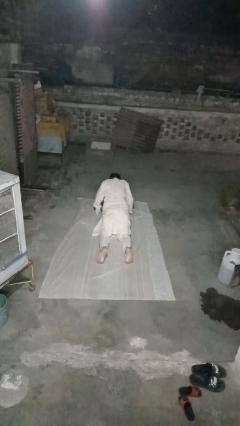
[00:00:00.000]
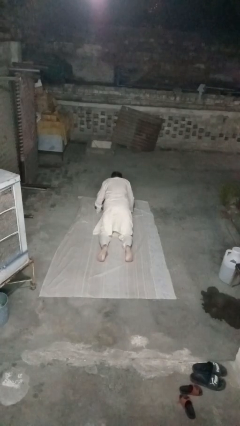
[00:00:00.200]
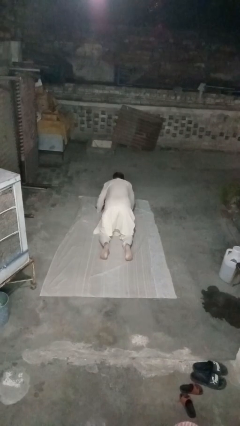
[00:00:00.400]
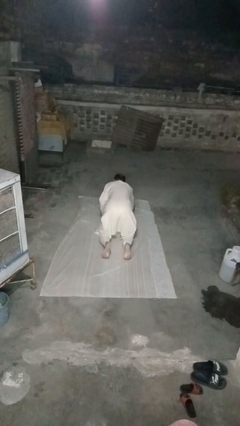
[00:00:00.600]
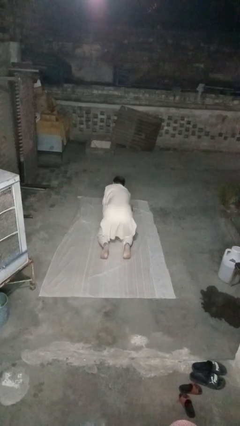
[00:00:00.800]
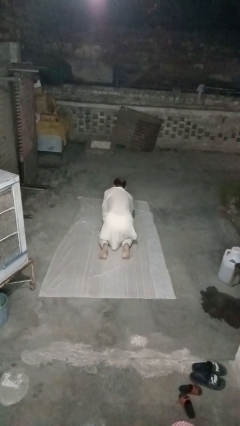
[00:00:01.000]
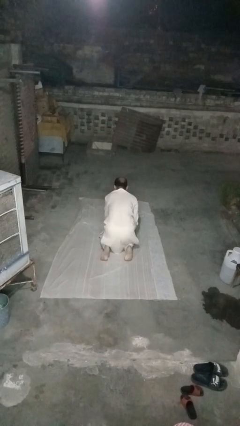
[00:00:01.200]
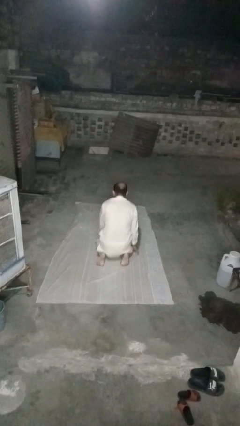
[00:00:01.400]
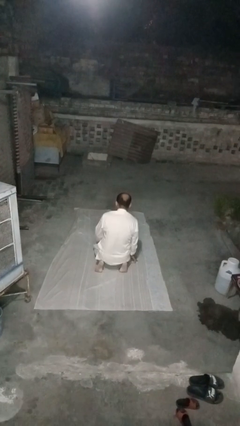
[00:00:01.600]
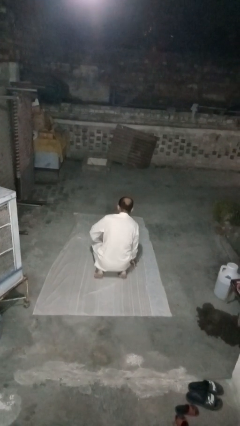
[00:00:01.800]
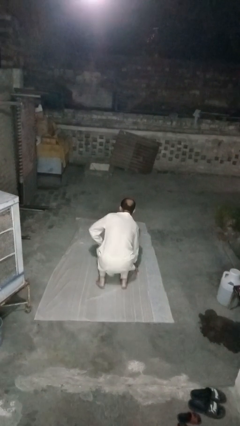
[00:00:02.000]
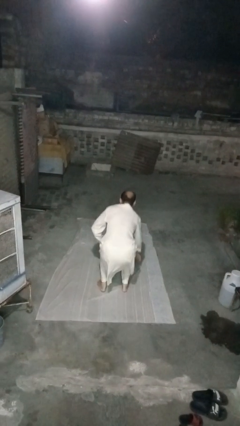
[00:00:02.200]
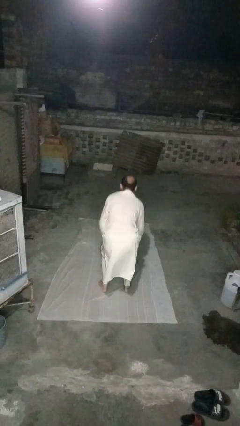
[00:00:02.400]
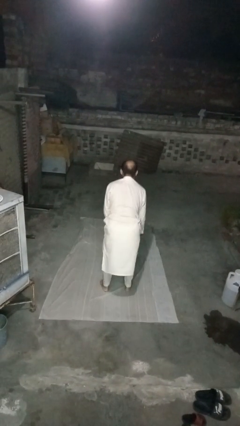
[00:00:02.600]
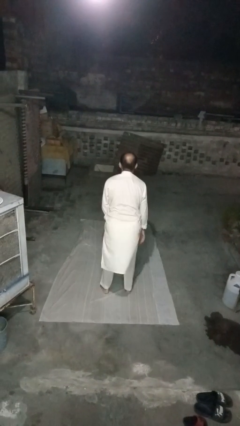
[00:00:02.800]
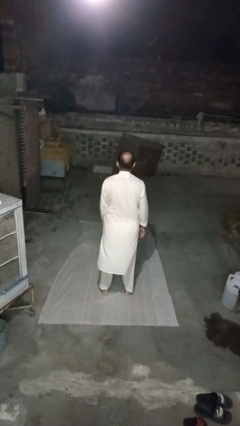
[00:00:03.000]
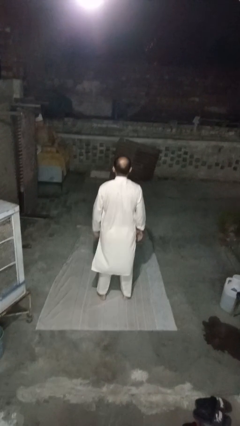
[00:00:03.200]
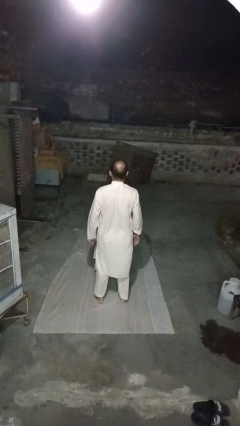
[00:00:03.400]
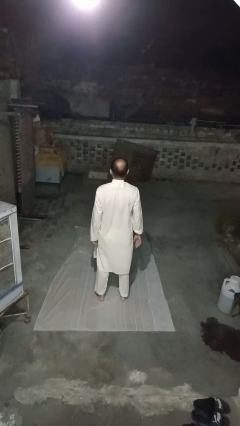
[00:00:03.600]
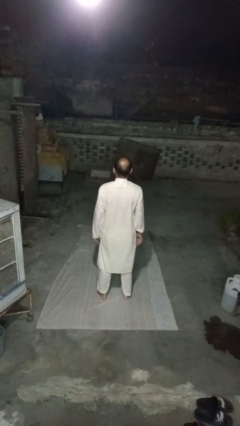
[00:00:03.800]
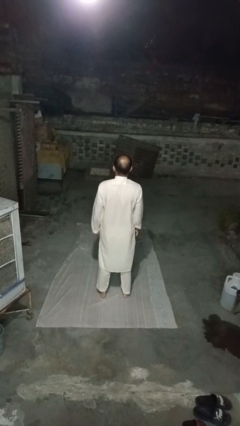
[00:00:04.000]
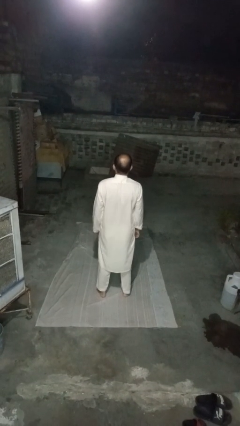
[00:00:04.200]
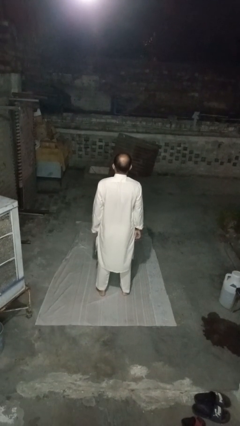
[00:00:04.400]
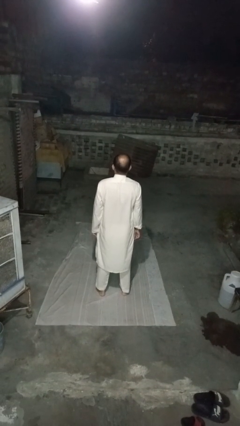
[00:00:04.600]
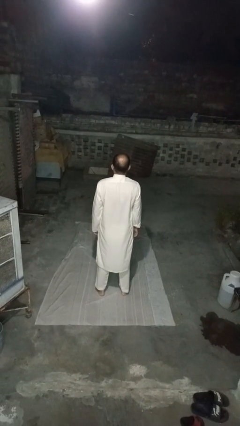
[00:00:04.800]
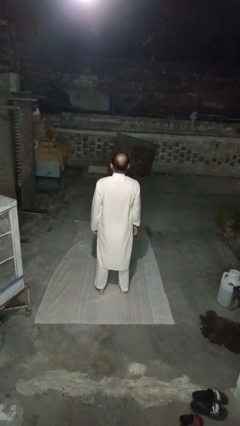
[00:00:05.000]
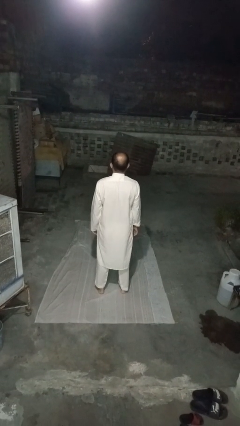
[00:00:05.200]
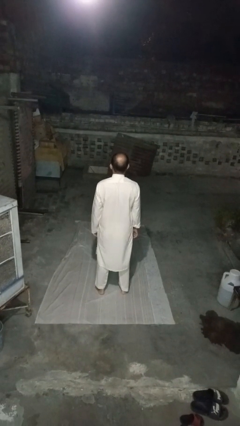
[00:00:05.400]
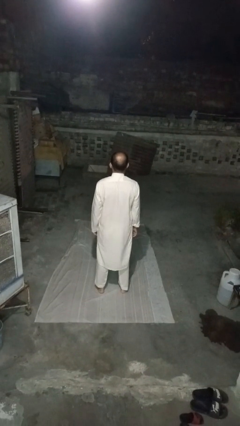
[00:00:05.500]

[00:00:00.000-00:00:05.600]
person stands up from floor

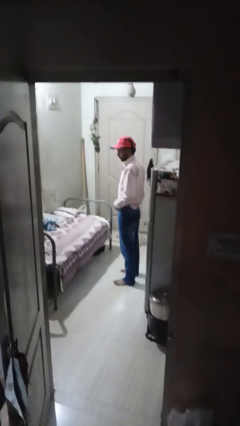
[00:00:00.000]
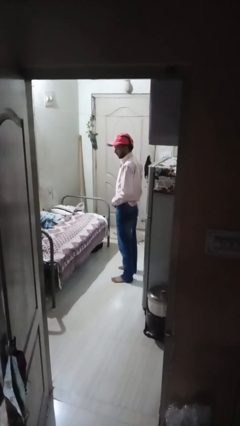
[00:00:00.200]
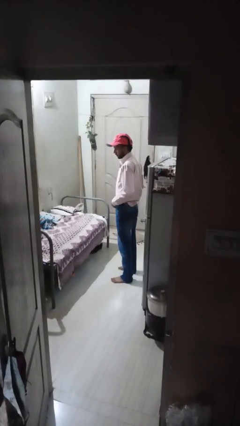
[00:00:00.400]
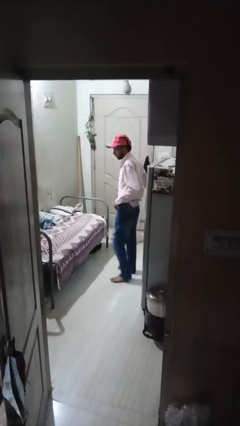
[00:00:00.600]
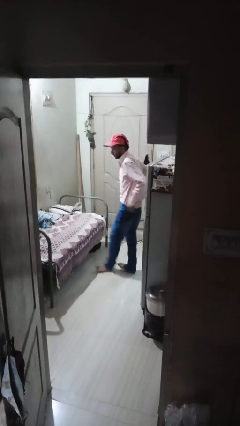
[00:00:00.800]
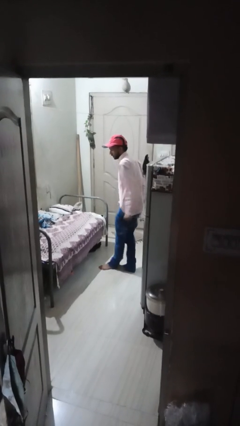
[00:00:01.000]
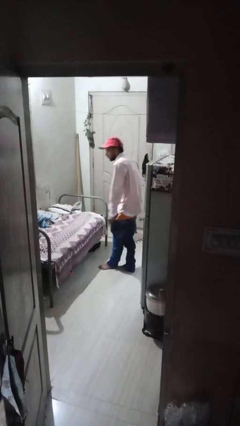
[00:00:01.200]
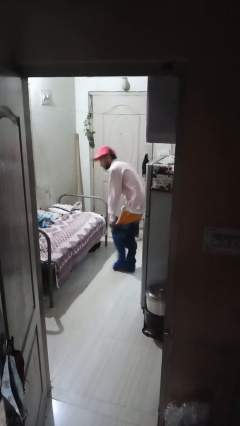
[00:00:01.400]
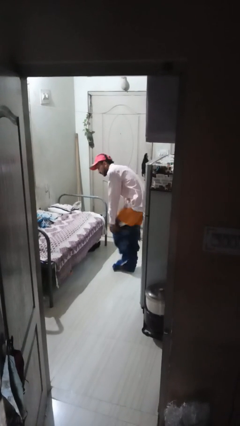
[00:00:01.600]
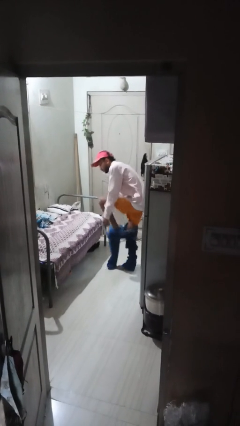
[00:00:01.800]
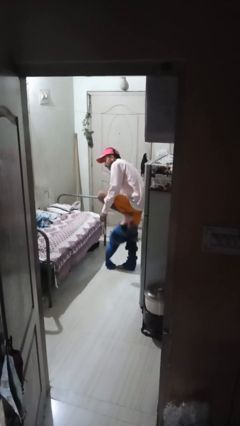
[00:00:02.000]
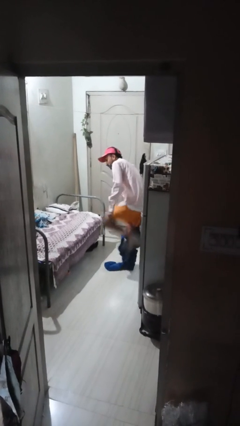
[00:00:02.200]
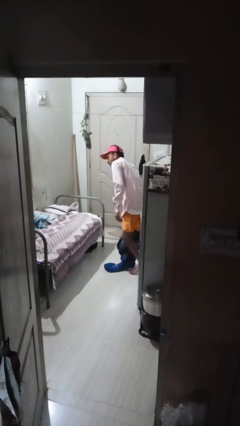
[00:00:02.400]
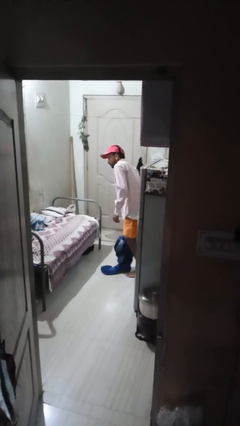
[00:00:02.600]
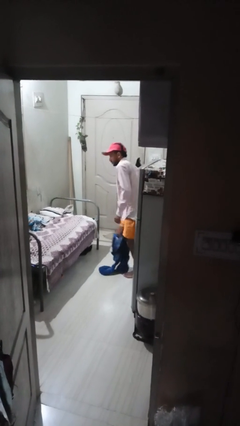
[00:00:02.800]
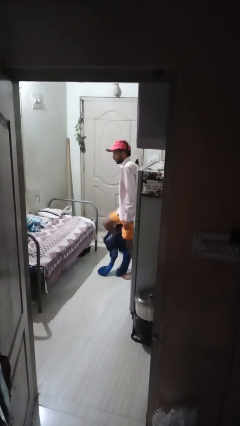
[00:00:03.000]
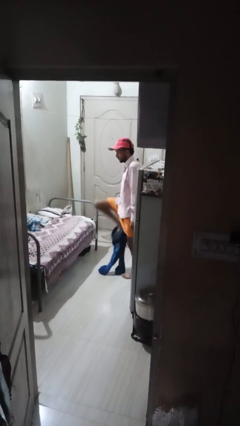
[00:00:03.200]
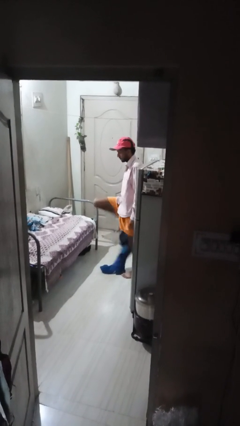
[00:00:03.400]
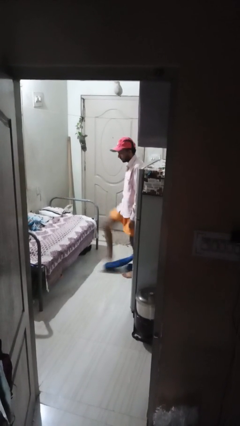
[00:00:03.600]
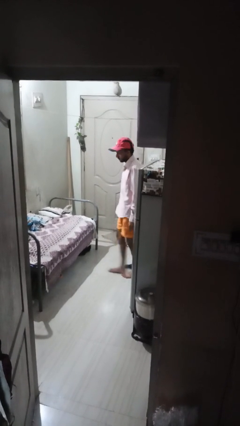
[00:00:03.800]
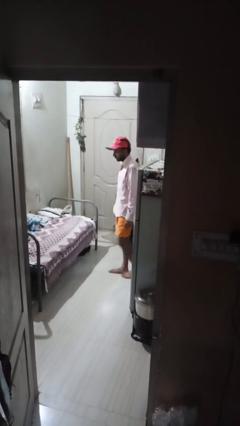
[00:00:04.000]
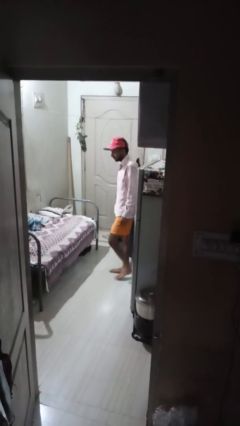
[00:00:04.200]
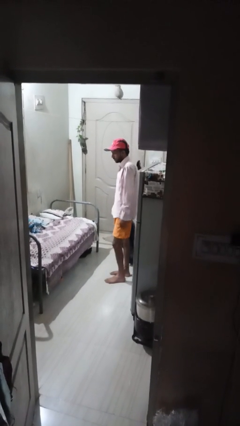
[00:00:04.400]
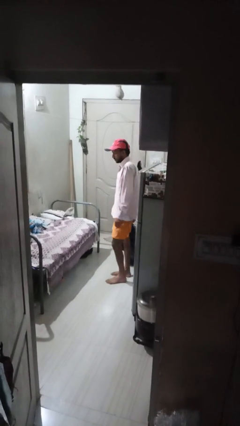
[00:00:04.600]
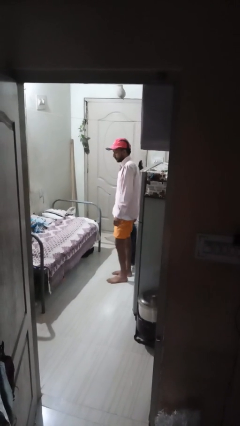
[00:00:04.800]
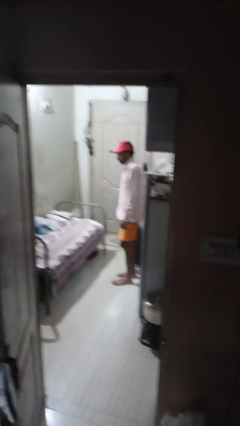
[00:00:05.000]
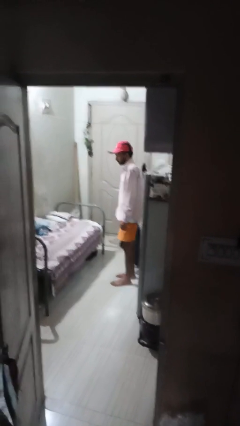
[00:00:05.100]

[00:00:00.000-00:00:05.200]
person takes off pants

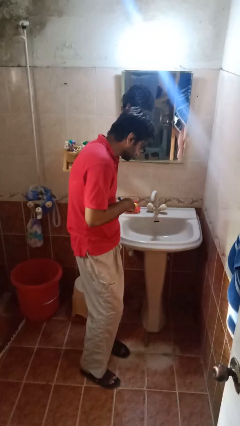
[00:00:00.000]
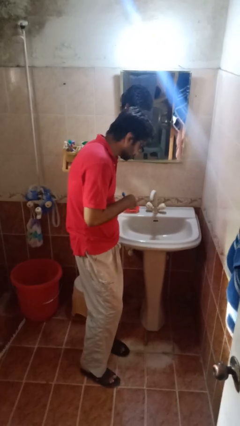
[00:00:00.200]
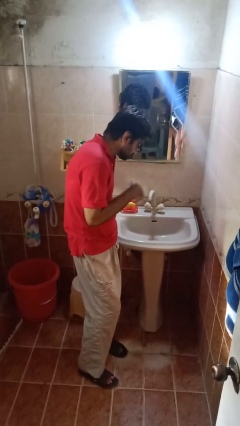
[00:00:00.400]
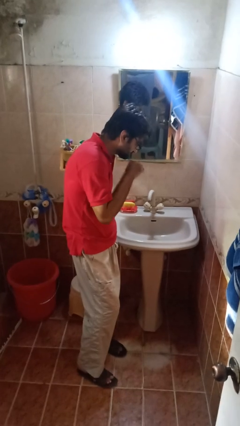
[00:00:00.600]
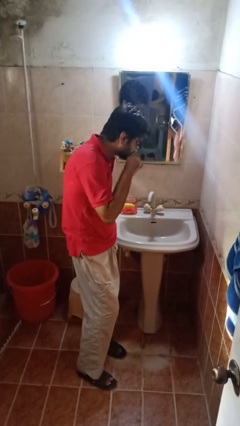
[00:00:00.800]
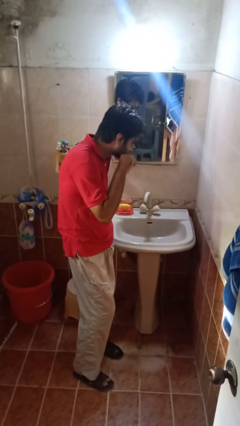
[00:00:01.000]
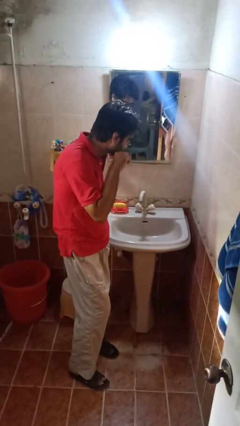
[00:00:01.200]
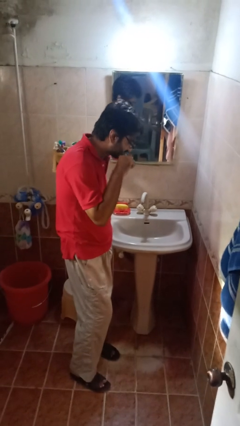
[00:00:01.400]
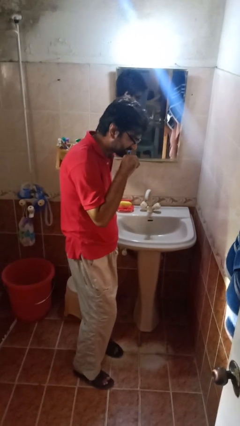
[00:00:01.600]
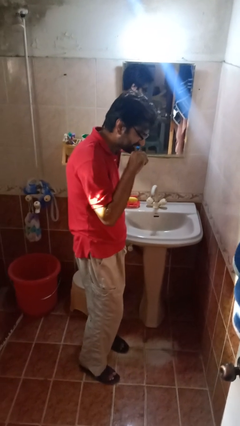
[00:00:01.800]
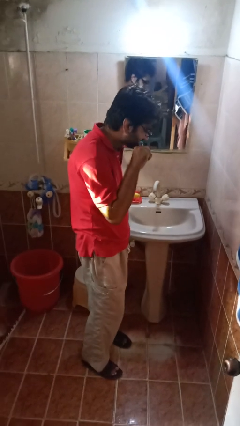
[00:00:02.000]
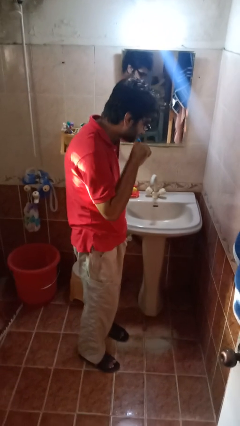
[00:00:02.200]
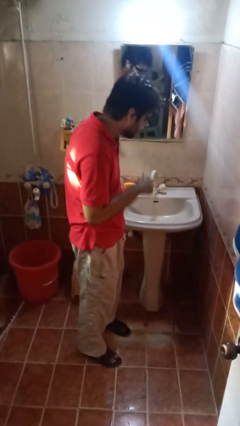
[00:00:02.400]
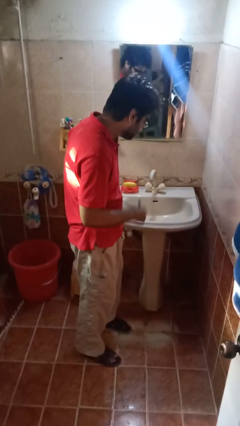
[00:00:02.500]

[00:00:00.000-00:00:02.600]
person brushes teeth

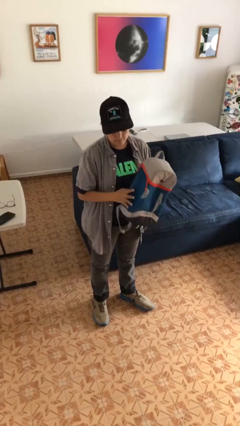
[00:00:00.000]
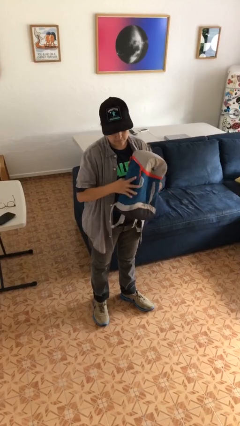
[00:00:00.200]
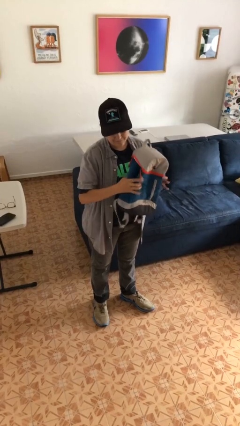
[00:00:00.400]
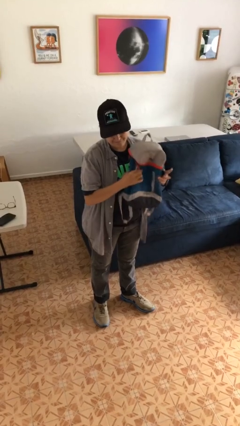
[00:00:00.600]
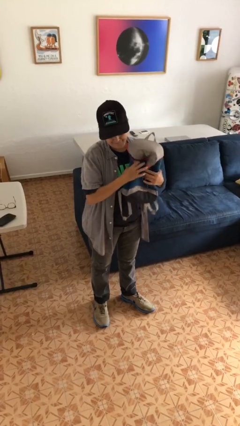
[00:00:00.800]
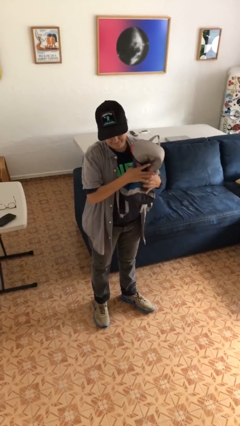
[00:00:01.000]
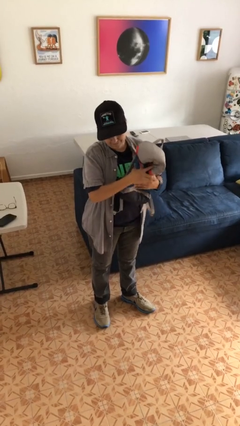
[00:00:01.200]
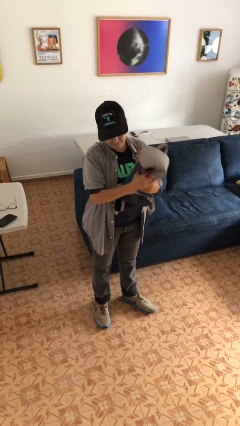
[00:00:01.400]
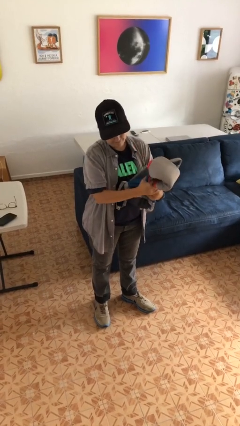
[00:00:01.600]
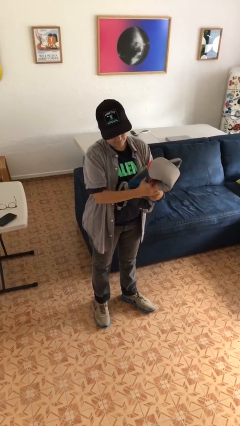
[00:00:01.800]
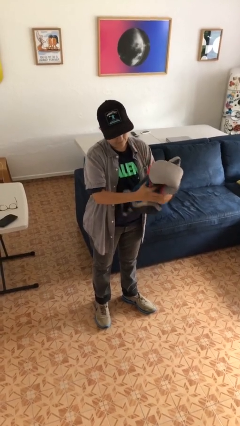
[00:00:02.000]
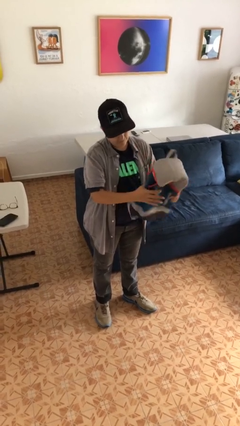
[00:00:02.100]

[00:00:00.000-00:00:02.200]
person squeezes object

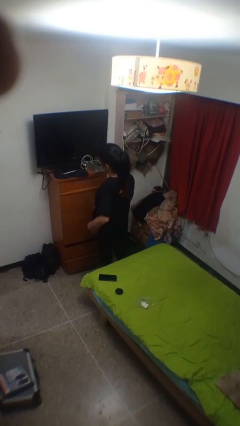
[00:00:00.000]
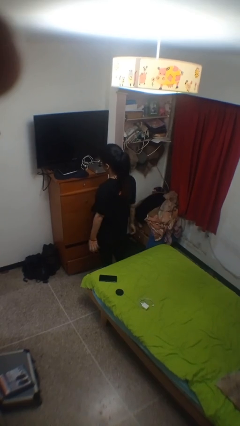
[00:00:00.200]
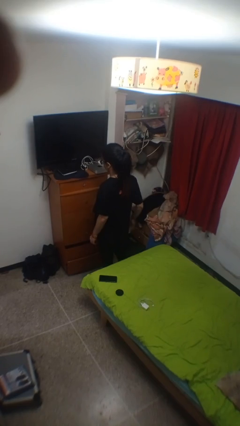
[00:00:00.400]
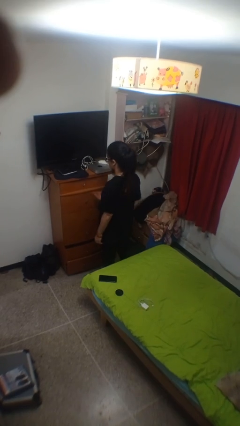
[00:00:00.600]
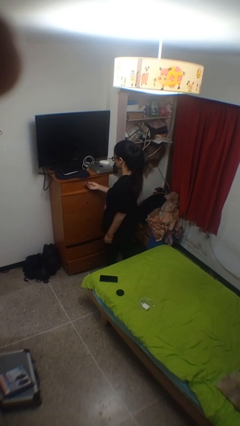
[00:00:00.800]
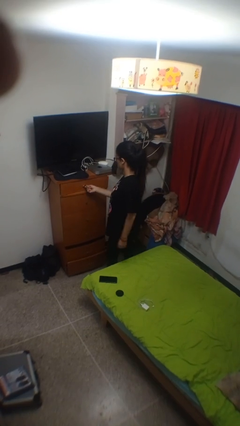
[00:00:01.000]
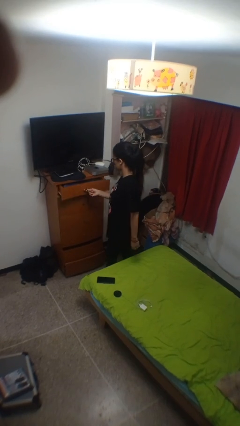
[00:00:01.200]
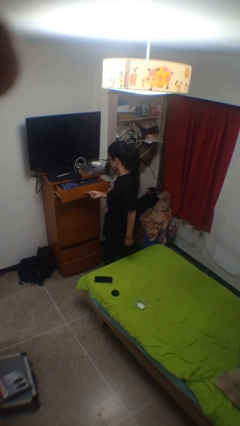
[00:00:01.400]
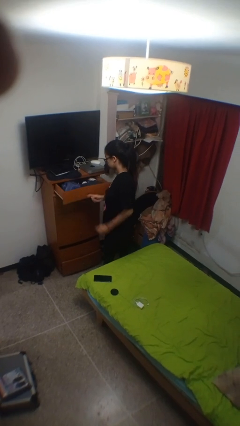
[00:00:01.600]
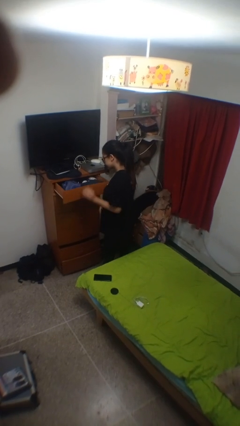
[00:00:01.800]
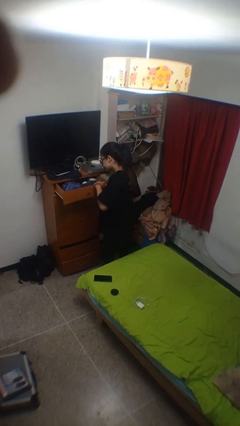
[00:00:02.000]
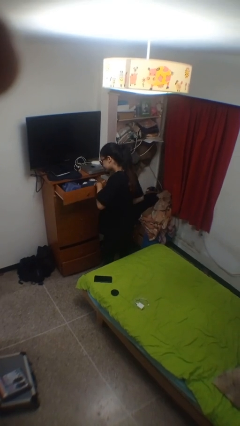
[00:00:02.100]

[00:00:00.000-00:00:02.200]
person opens dresser drawer
